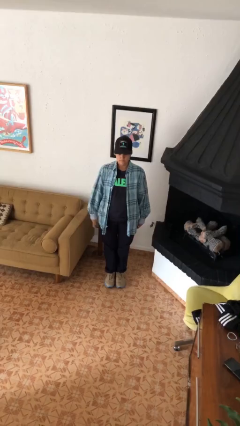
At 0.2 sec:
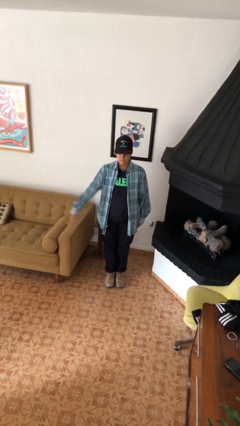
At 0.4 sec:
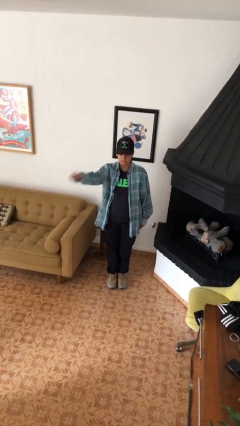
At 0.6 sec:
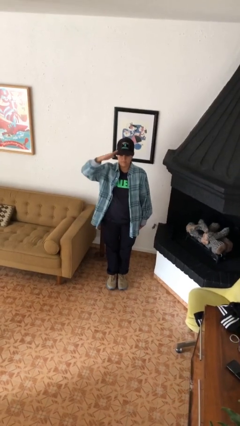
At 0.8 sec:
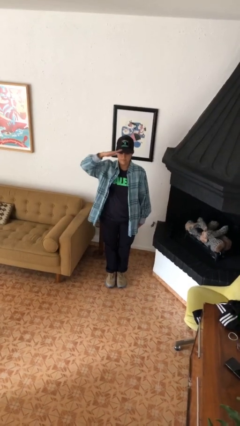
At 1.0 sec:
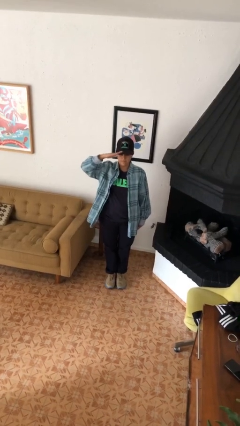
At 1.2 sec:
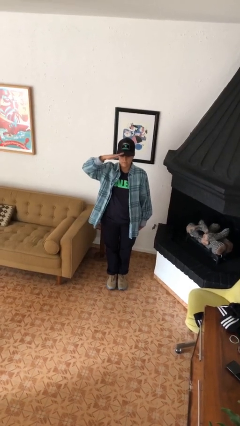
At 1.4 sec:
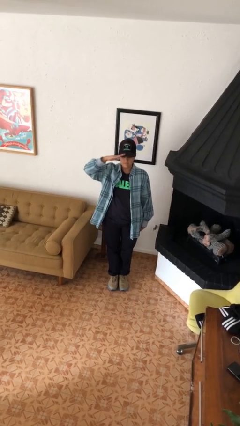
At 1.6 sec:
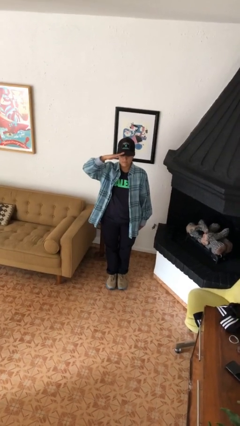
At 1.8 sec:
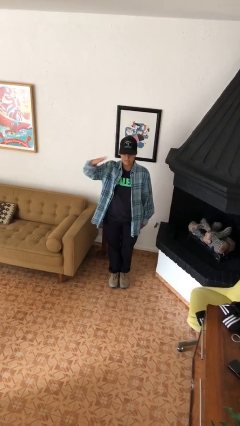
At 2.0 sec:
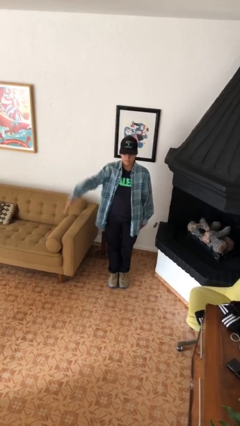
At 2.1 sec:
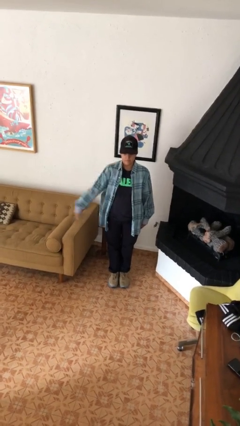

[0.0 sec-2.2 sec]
person salutes

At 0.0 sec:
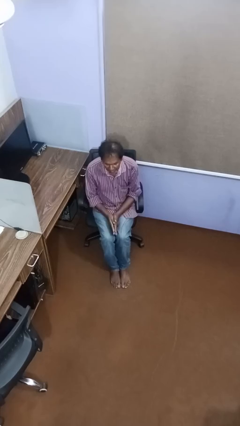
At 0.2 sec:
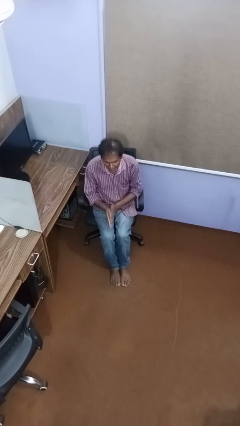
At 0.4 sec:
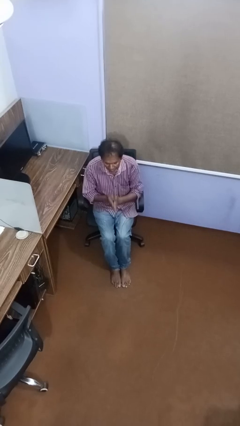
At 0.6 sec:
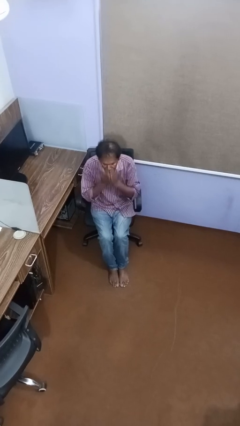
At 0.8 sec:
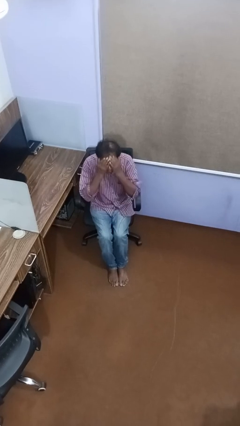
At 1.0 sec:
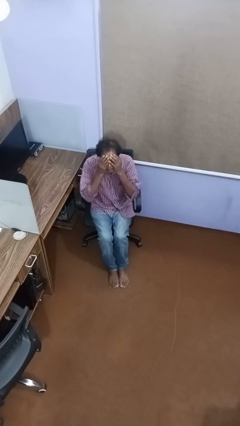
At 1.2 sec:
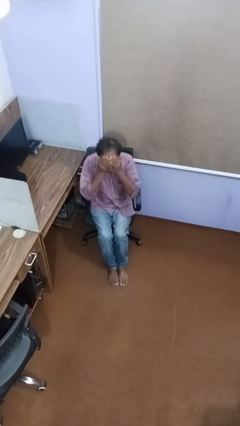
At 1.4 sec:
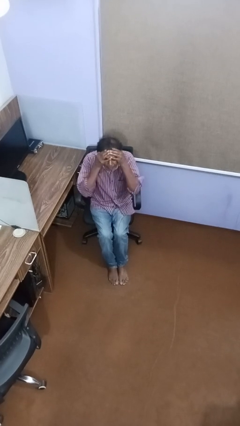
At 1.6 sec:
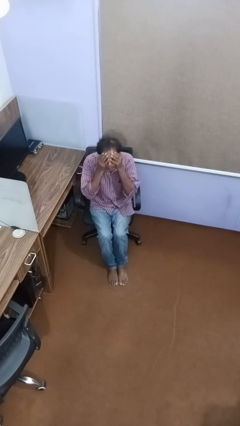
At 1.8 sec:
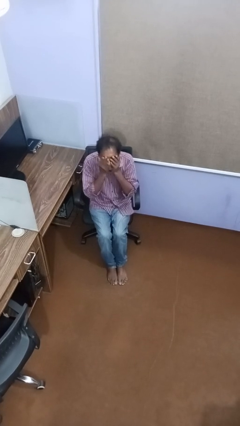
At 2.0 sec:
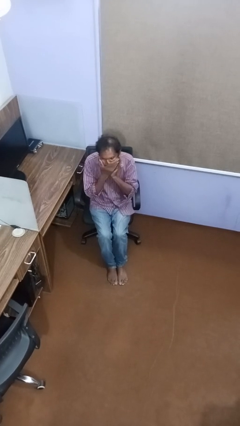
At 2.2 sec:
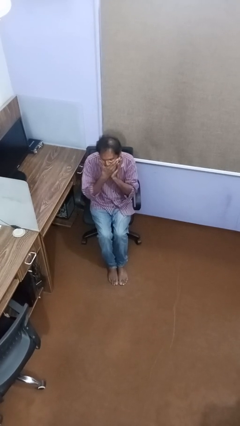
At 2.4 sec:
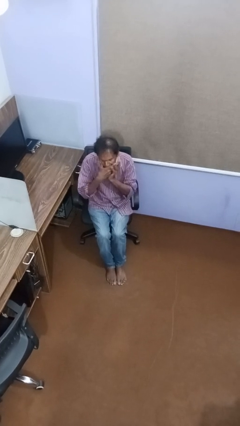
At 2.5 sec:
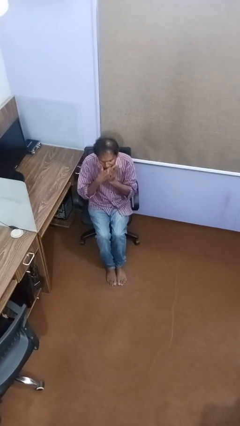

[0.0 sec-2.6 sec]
person applies foundation makeup

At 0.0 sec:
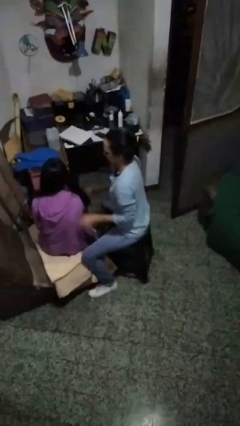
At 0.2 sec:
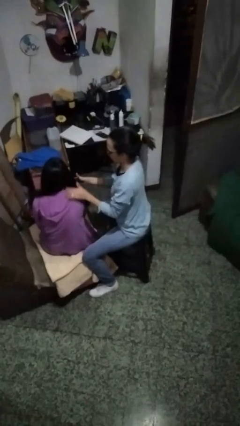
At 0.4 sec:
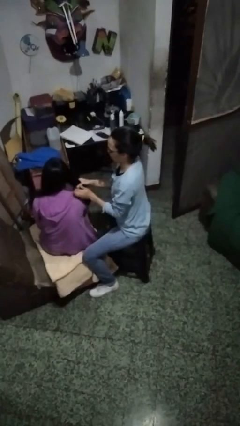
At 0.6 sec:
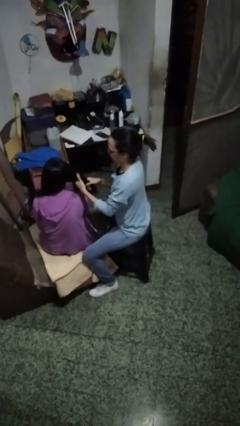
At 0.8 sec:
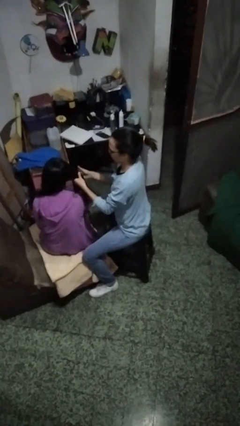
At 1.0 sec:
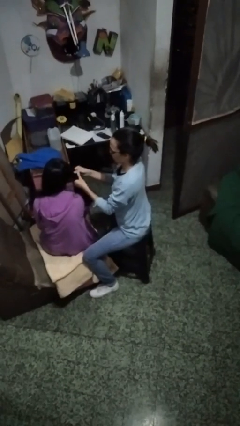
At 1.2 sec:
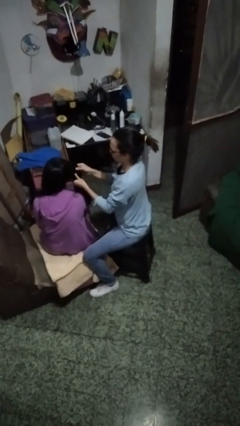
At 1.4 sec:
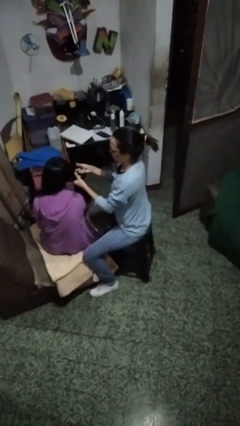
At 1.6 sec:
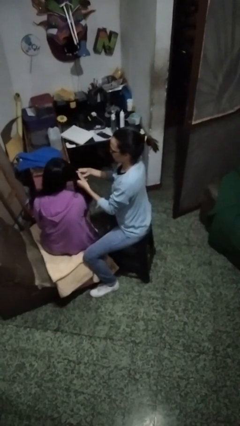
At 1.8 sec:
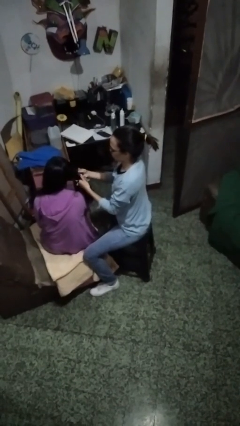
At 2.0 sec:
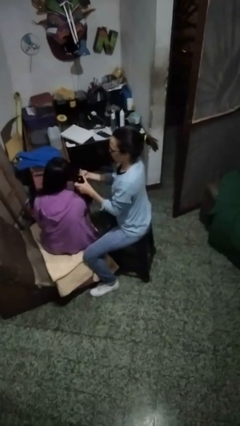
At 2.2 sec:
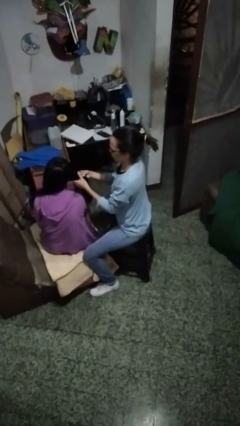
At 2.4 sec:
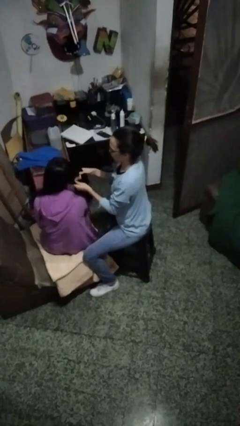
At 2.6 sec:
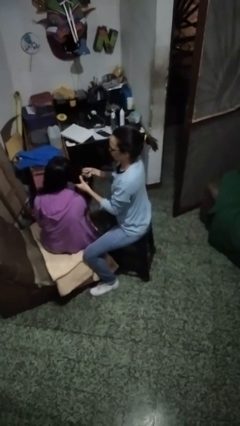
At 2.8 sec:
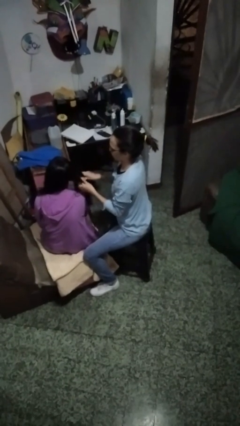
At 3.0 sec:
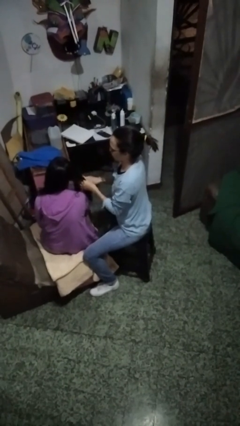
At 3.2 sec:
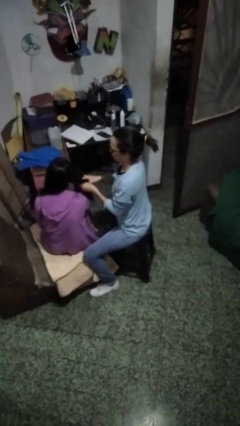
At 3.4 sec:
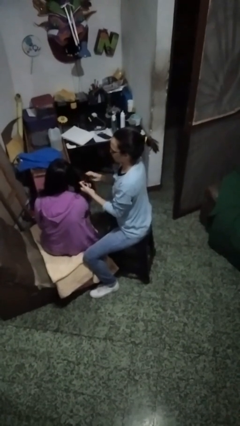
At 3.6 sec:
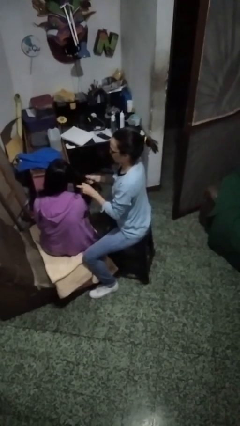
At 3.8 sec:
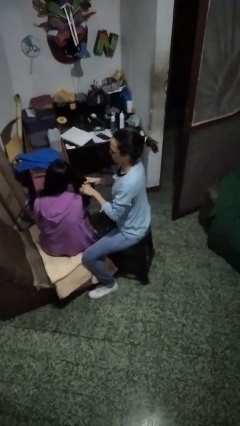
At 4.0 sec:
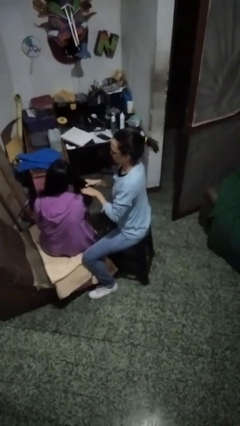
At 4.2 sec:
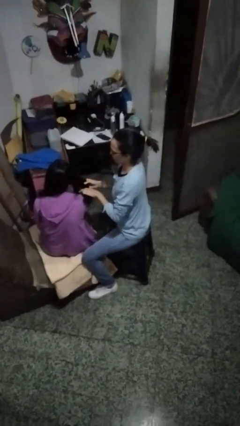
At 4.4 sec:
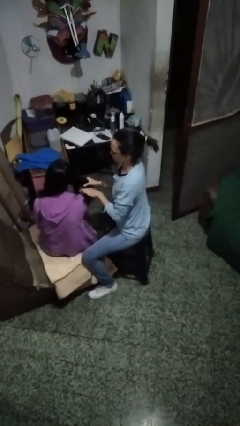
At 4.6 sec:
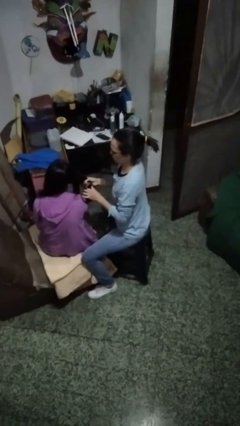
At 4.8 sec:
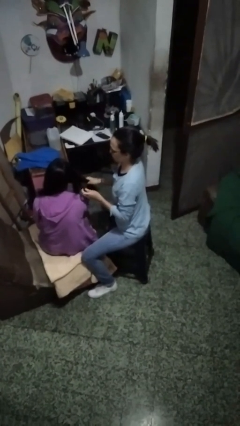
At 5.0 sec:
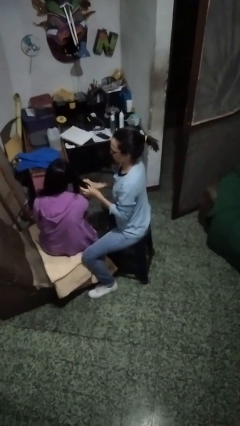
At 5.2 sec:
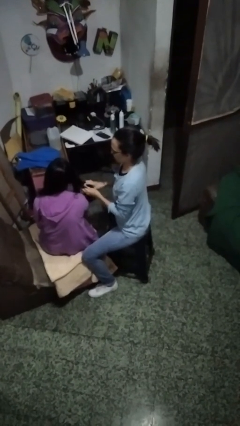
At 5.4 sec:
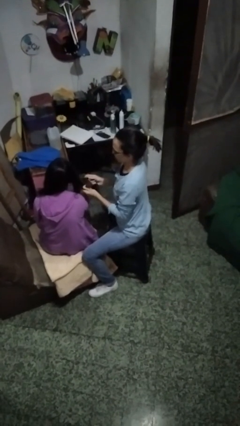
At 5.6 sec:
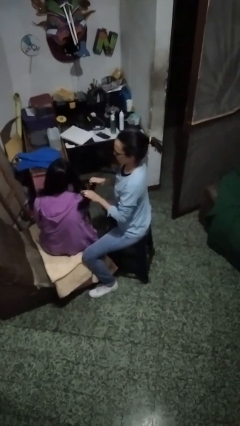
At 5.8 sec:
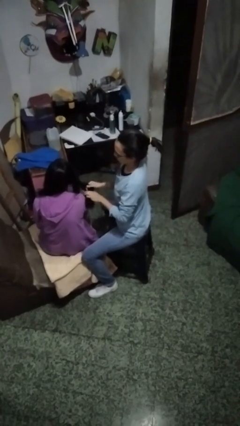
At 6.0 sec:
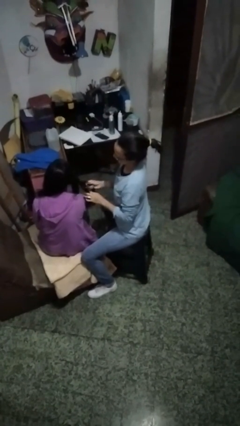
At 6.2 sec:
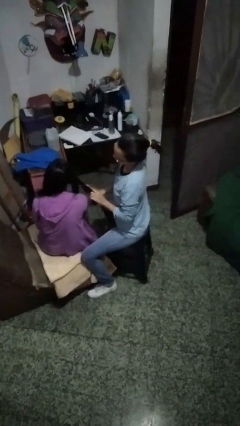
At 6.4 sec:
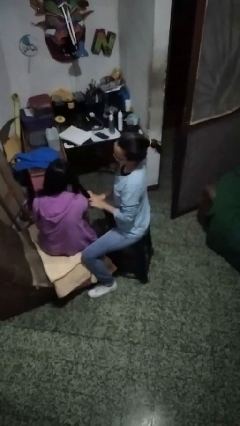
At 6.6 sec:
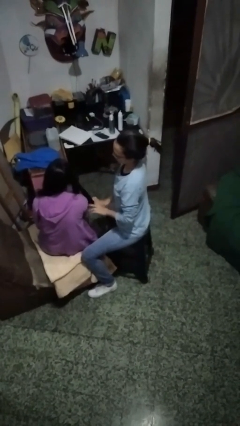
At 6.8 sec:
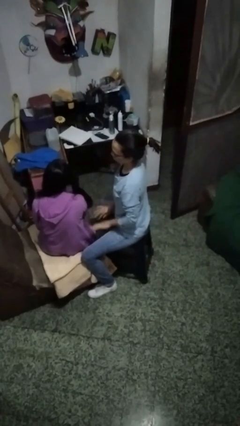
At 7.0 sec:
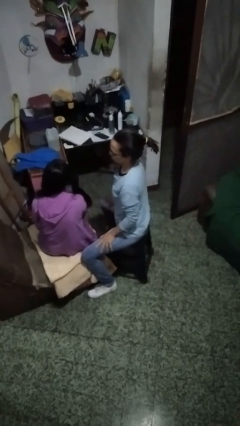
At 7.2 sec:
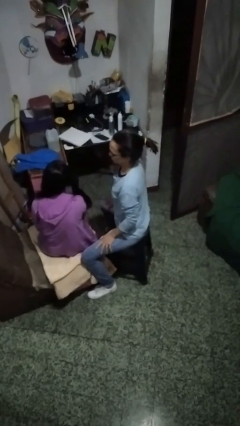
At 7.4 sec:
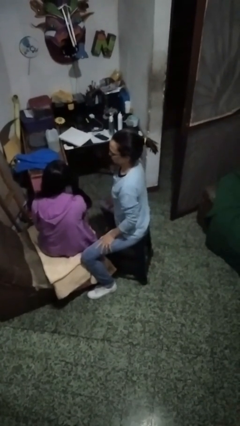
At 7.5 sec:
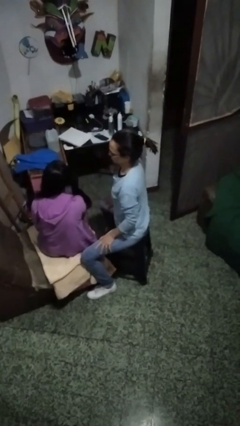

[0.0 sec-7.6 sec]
person braids hair of person

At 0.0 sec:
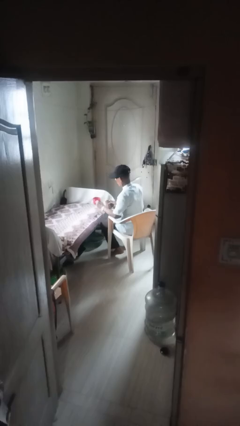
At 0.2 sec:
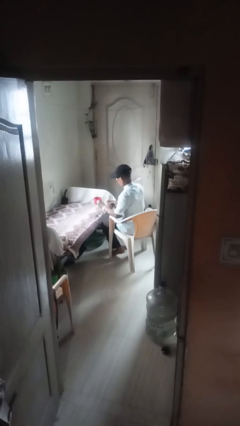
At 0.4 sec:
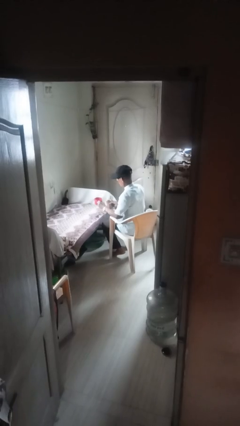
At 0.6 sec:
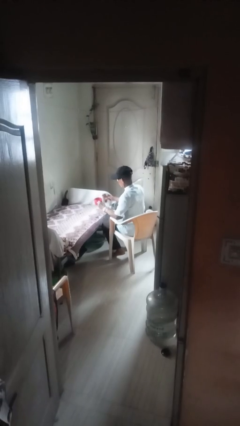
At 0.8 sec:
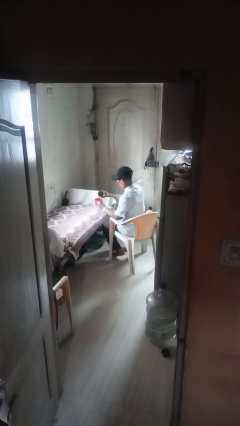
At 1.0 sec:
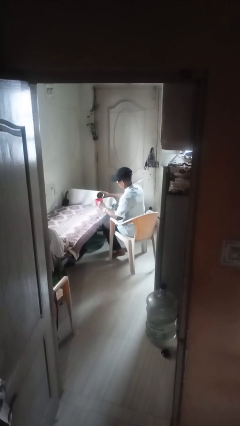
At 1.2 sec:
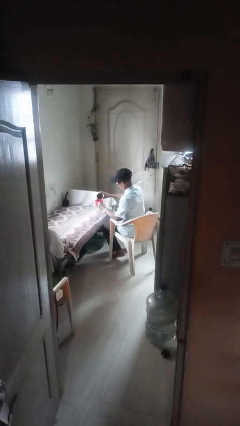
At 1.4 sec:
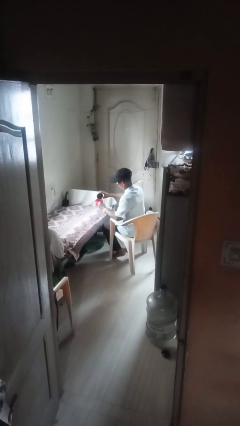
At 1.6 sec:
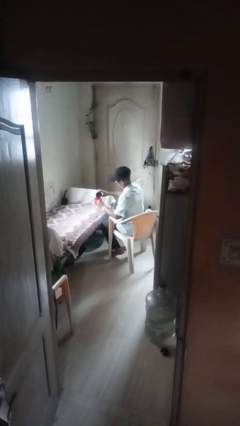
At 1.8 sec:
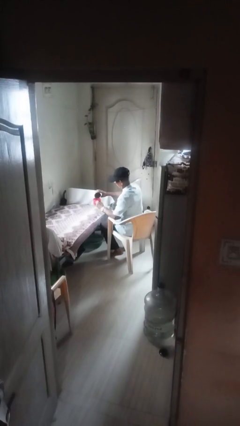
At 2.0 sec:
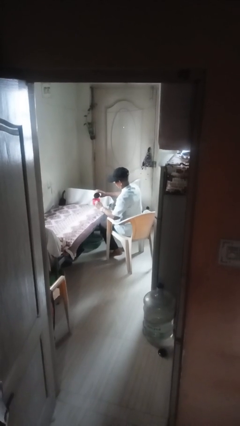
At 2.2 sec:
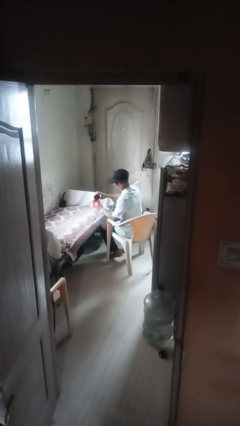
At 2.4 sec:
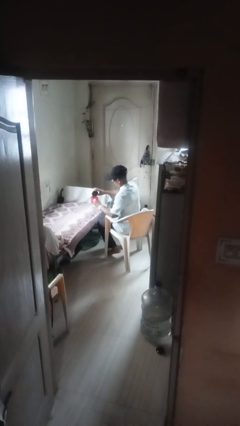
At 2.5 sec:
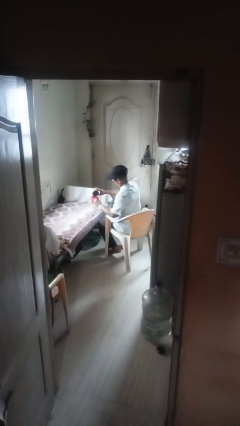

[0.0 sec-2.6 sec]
person pours coffee into mug

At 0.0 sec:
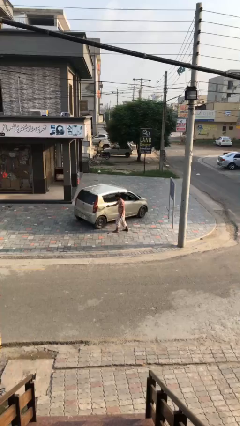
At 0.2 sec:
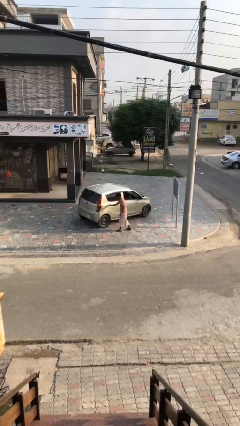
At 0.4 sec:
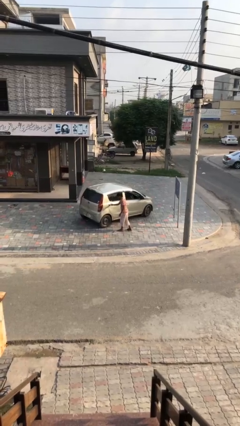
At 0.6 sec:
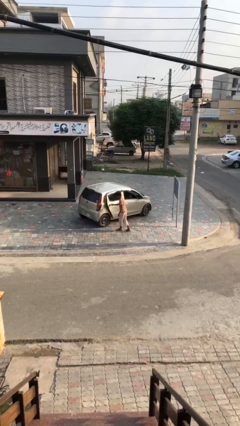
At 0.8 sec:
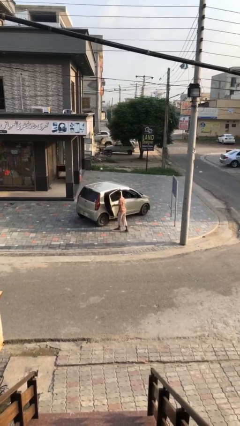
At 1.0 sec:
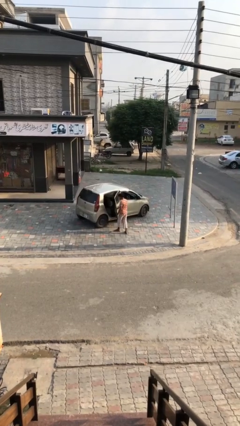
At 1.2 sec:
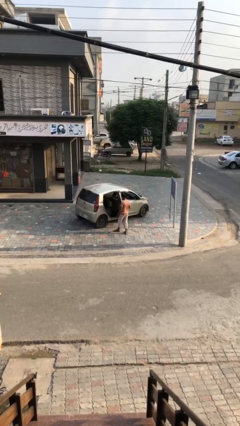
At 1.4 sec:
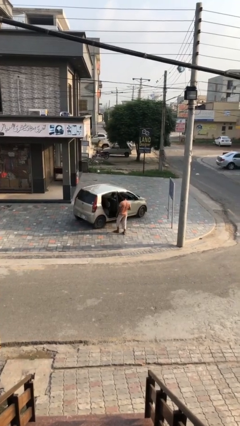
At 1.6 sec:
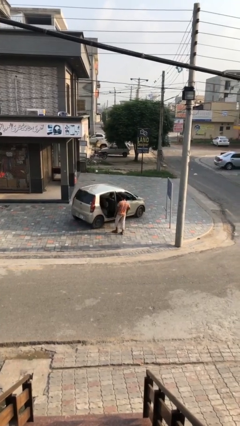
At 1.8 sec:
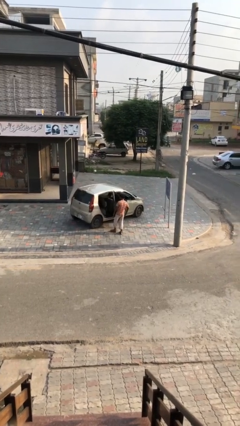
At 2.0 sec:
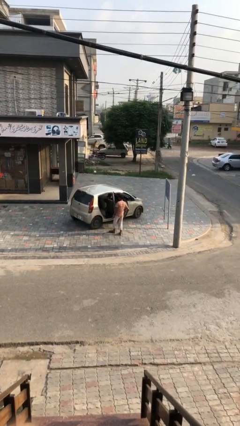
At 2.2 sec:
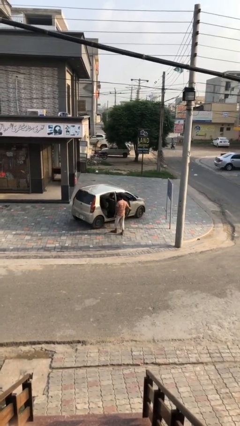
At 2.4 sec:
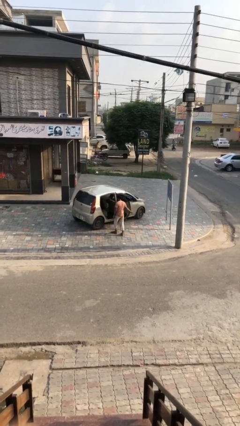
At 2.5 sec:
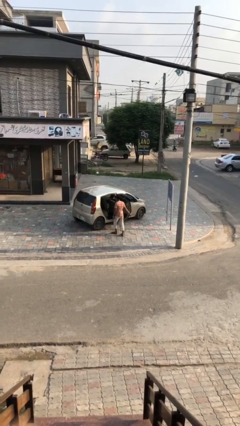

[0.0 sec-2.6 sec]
person opens car door
